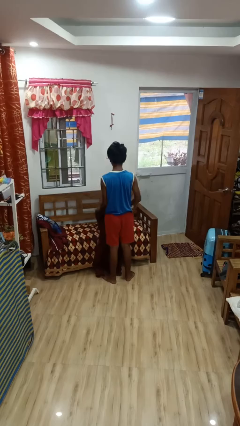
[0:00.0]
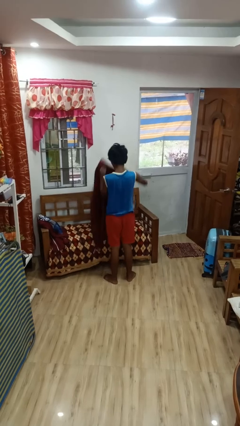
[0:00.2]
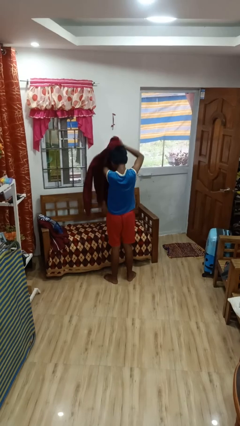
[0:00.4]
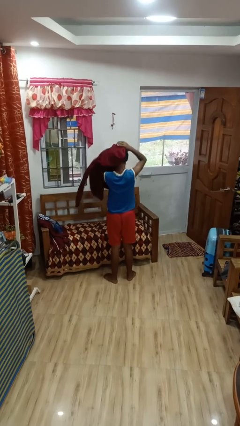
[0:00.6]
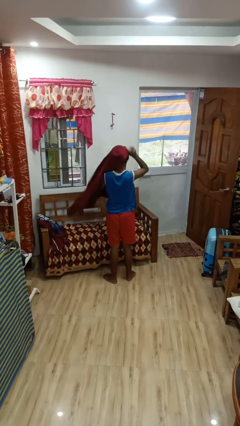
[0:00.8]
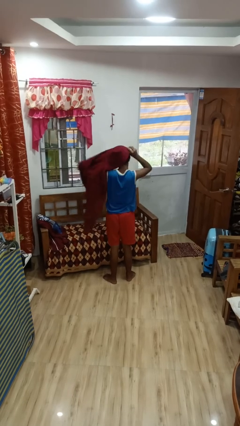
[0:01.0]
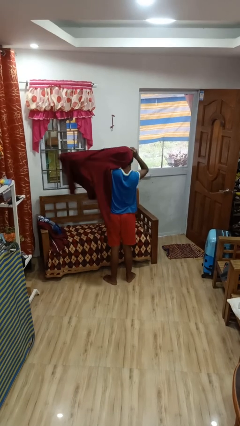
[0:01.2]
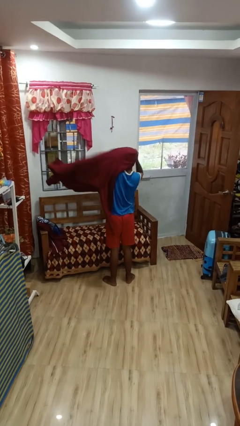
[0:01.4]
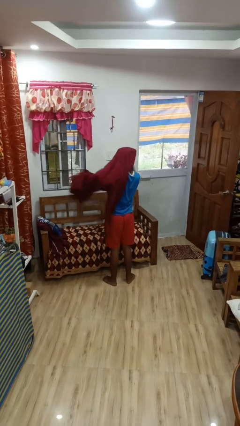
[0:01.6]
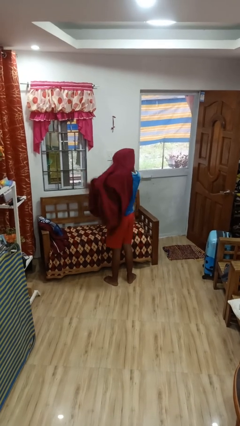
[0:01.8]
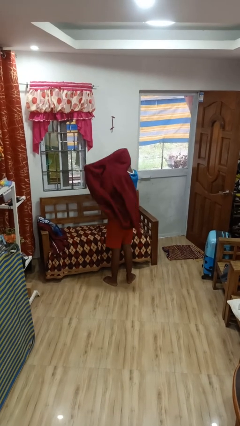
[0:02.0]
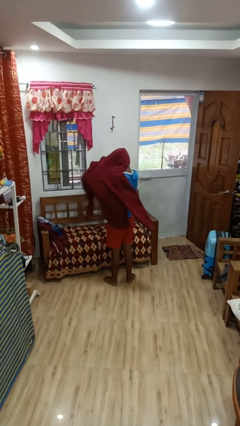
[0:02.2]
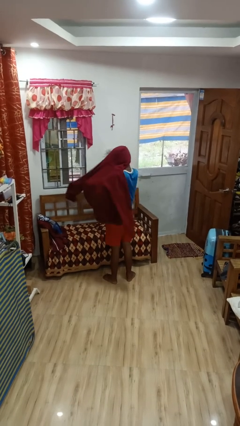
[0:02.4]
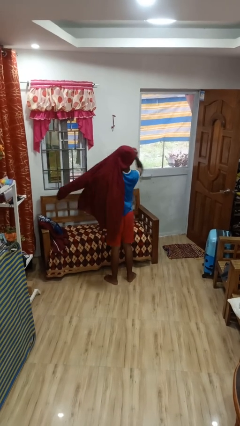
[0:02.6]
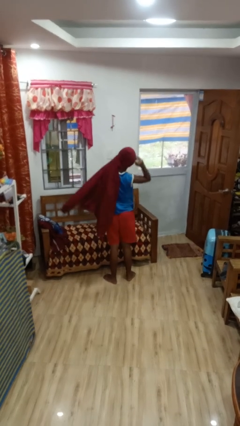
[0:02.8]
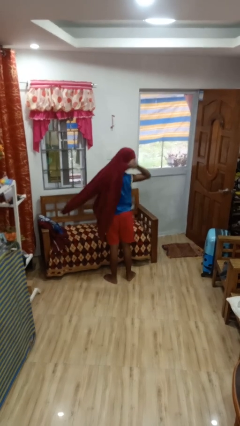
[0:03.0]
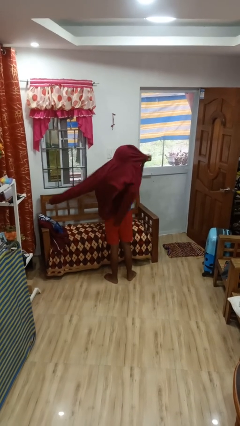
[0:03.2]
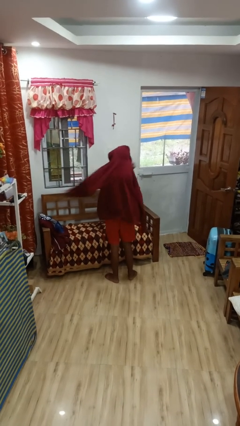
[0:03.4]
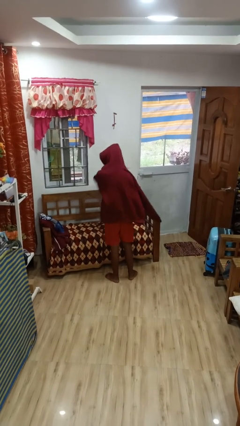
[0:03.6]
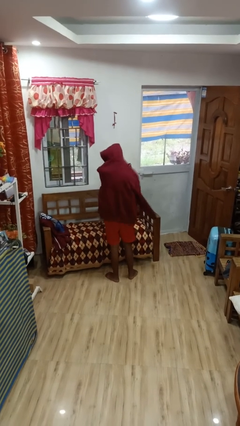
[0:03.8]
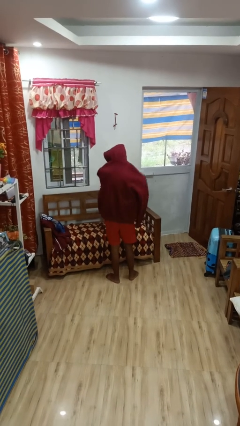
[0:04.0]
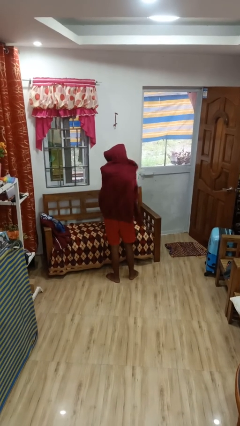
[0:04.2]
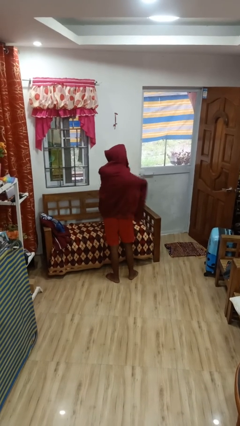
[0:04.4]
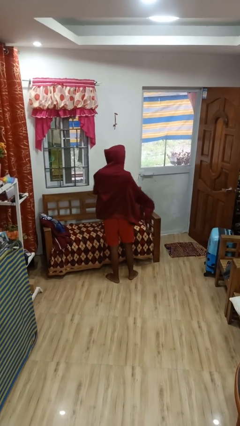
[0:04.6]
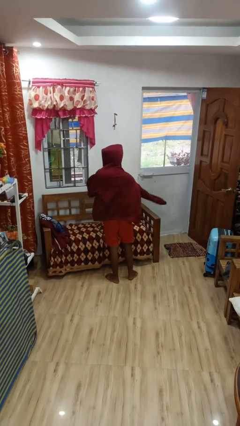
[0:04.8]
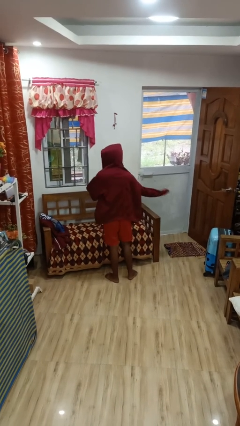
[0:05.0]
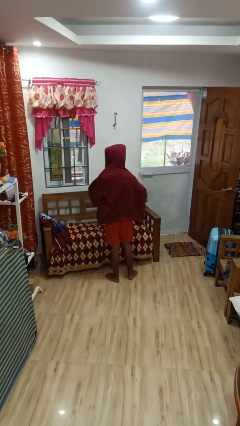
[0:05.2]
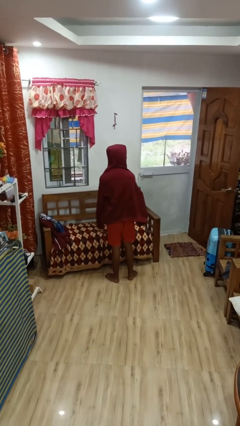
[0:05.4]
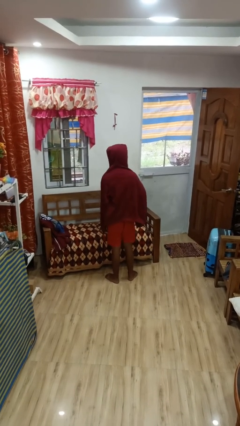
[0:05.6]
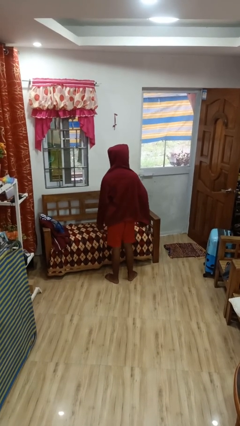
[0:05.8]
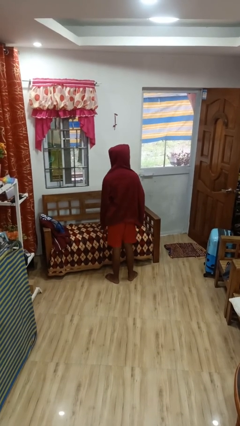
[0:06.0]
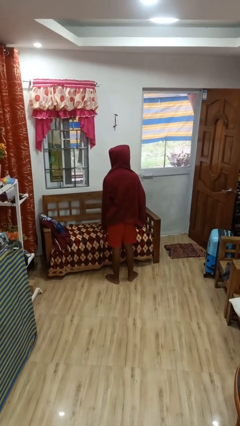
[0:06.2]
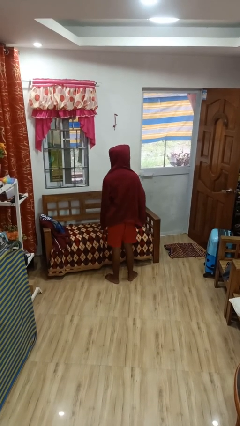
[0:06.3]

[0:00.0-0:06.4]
person puts on hoodie

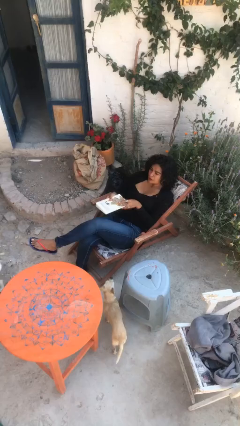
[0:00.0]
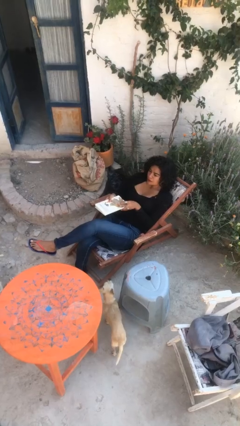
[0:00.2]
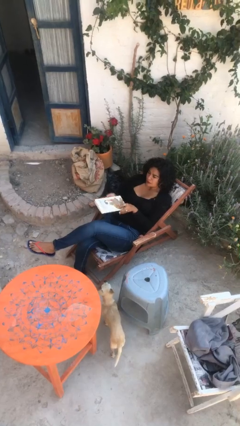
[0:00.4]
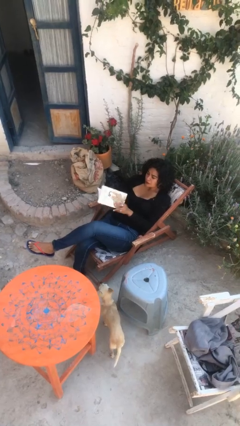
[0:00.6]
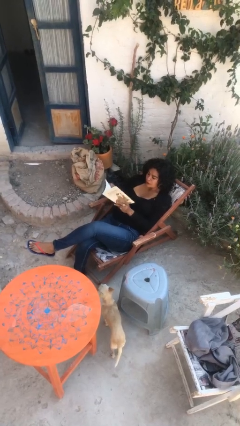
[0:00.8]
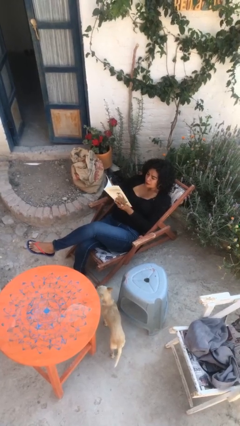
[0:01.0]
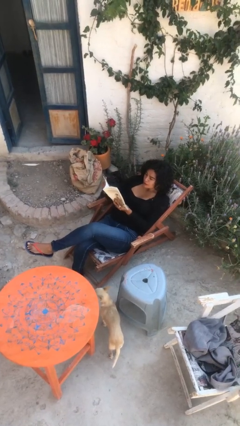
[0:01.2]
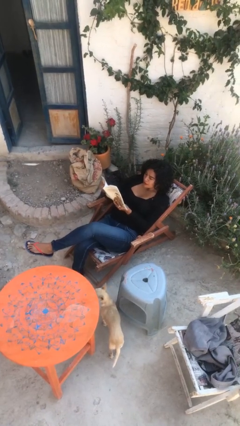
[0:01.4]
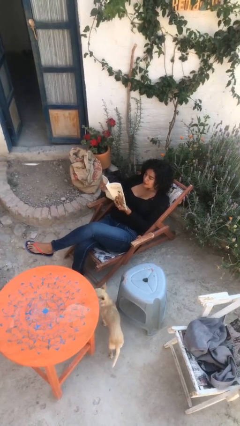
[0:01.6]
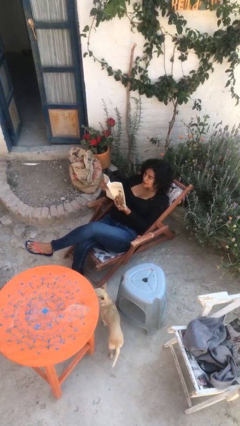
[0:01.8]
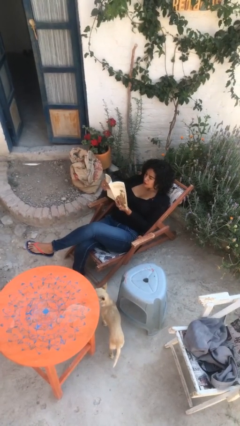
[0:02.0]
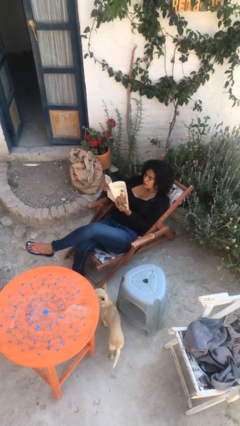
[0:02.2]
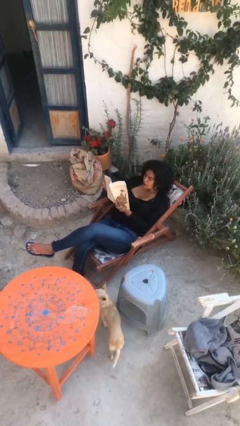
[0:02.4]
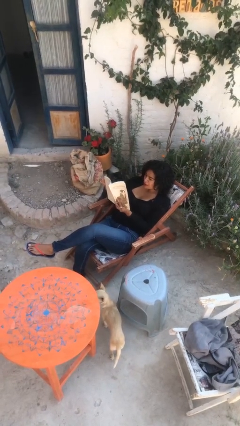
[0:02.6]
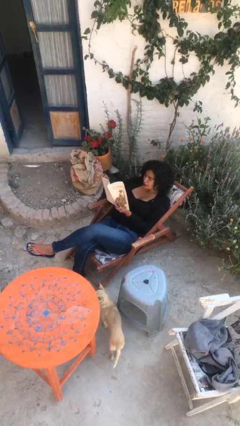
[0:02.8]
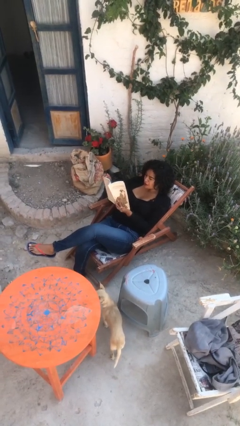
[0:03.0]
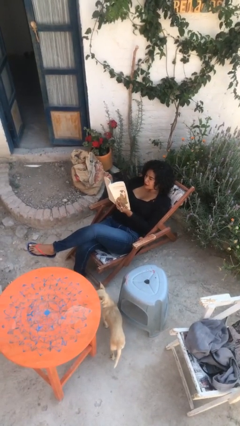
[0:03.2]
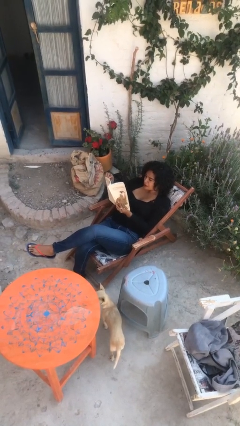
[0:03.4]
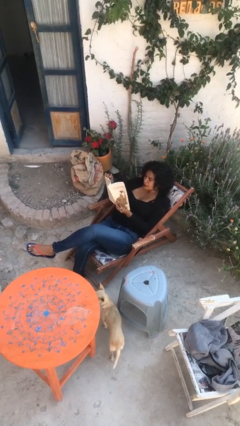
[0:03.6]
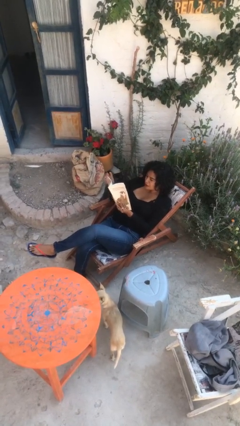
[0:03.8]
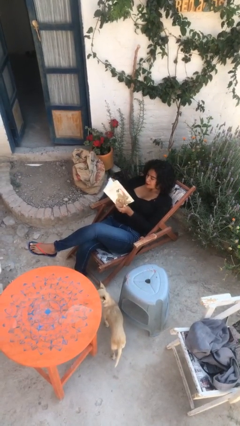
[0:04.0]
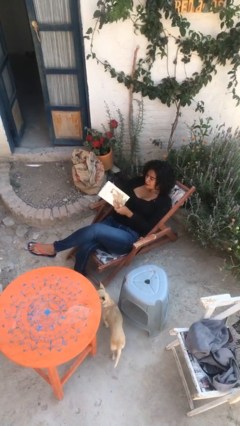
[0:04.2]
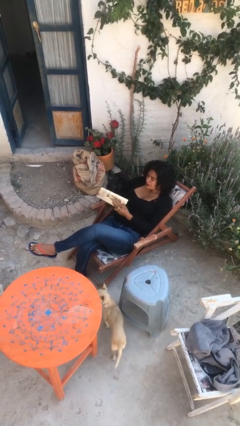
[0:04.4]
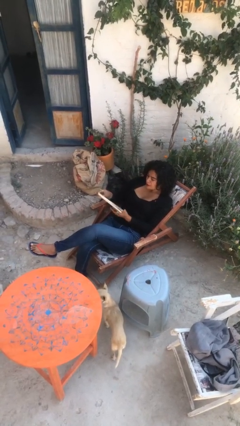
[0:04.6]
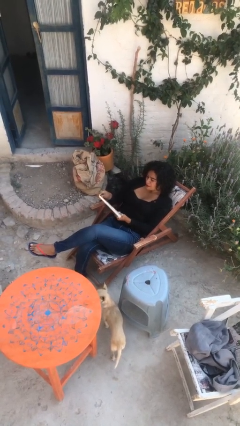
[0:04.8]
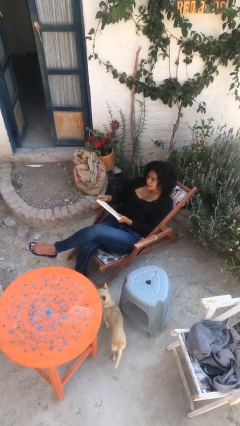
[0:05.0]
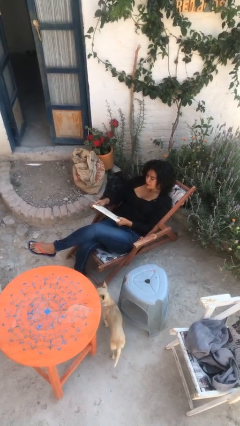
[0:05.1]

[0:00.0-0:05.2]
person reads document

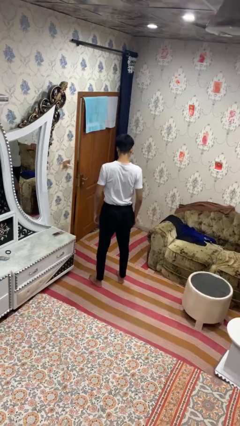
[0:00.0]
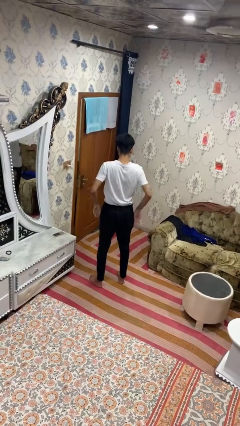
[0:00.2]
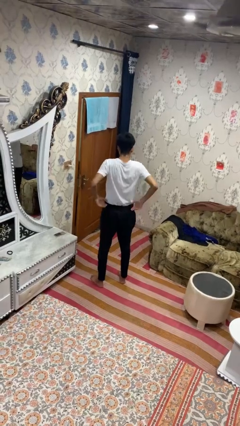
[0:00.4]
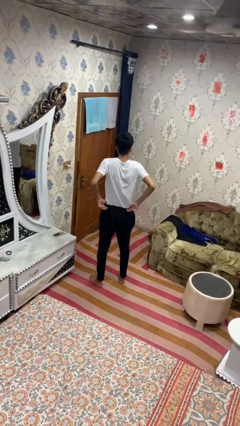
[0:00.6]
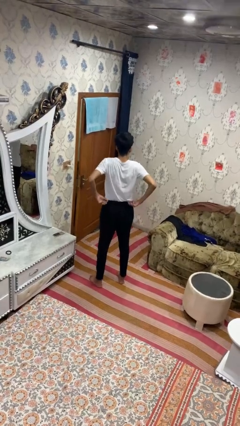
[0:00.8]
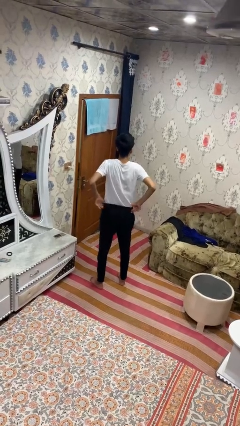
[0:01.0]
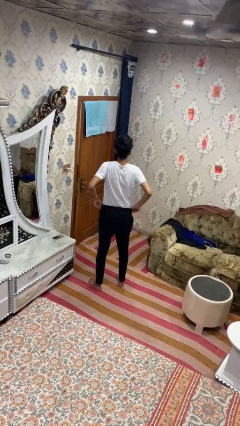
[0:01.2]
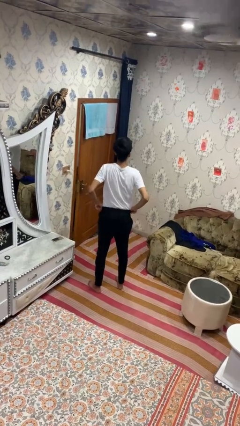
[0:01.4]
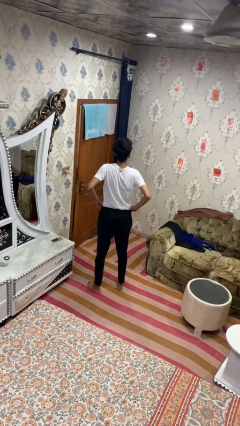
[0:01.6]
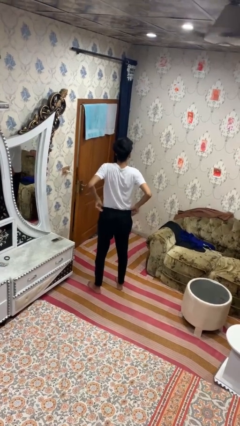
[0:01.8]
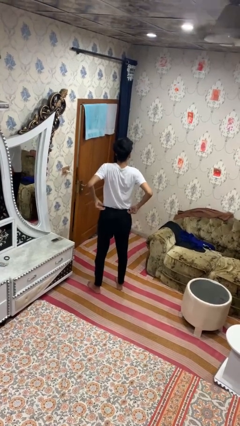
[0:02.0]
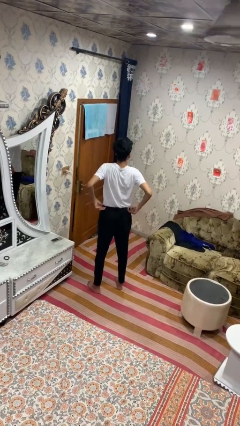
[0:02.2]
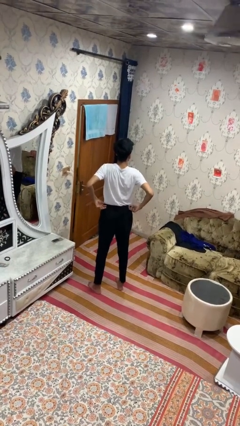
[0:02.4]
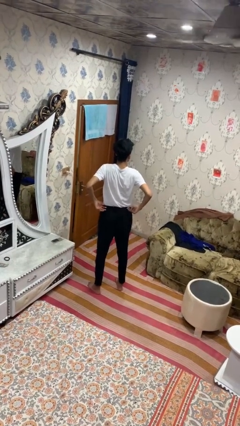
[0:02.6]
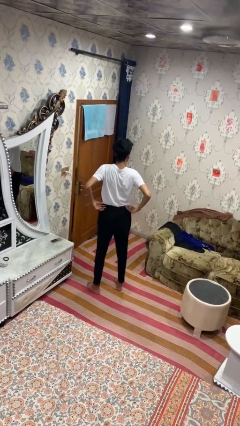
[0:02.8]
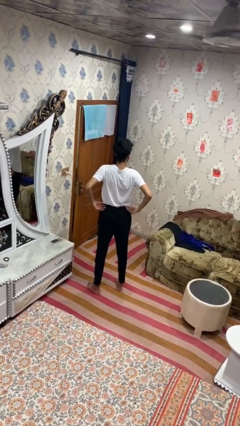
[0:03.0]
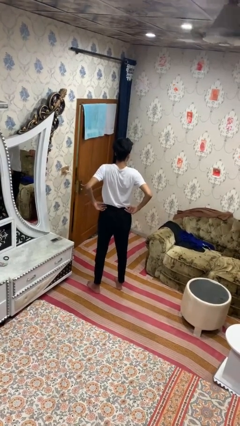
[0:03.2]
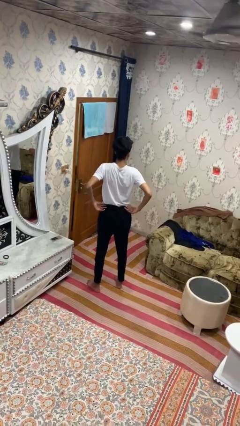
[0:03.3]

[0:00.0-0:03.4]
person hikes up pants

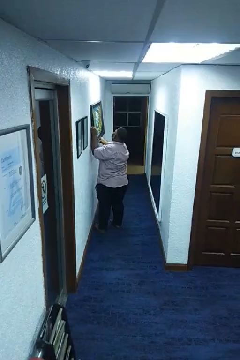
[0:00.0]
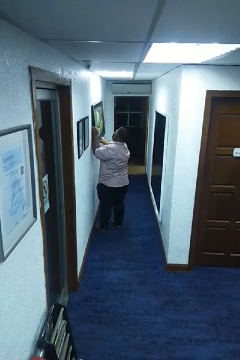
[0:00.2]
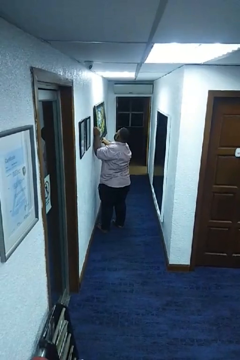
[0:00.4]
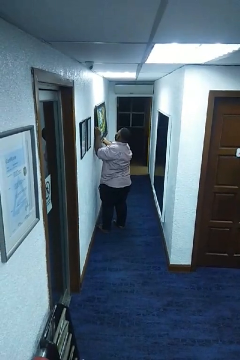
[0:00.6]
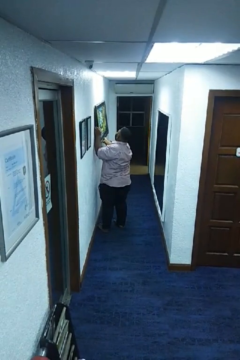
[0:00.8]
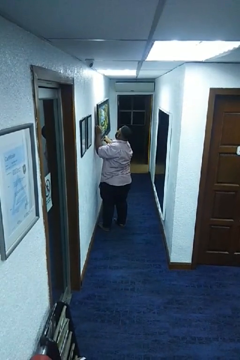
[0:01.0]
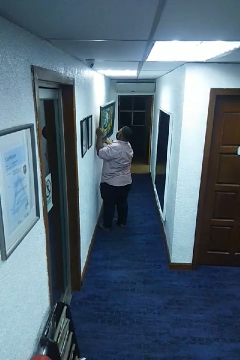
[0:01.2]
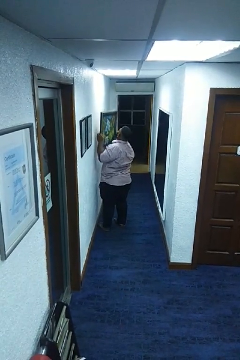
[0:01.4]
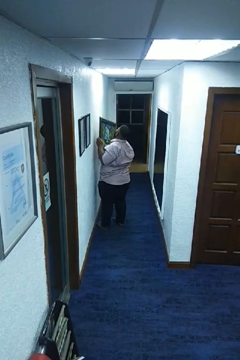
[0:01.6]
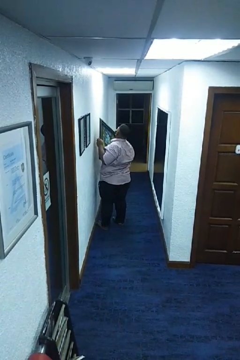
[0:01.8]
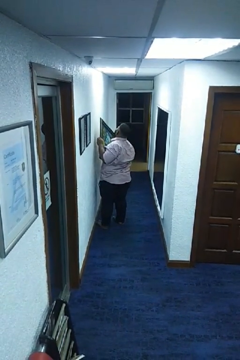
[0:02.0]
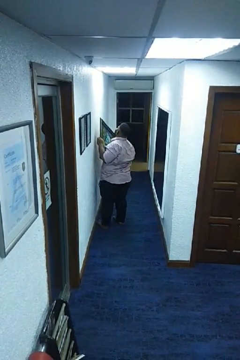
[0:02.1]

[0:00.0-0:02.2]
person takes down picture frame

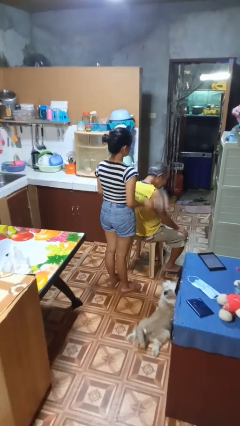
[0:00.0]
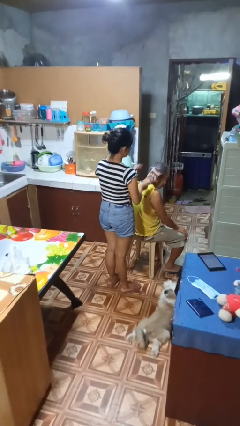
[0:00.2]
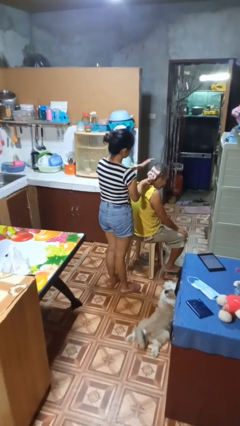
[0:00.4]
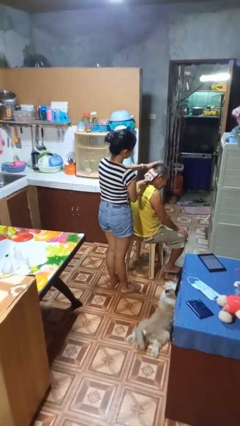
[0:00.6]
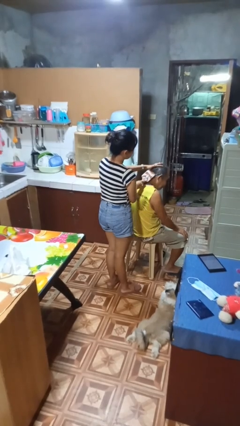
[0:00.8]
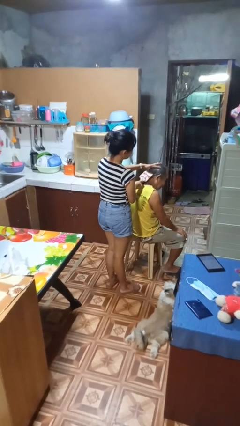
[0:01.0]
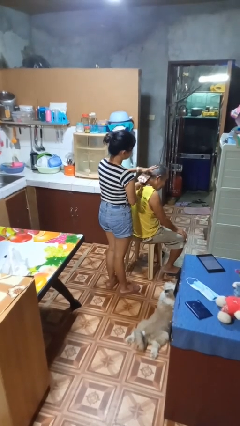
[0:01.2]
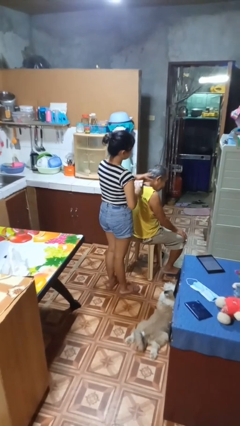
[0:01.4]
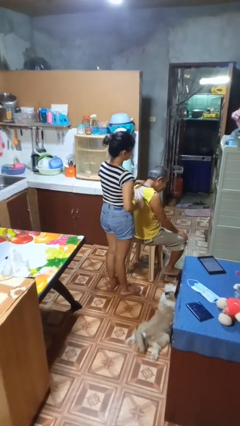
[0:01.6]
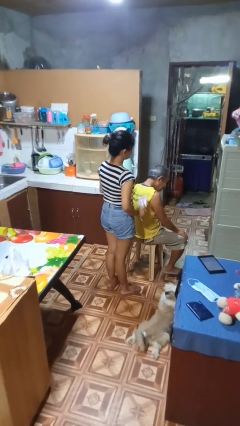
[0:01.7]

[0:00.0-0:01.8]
person brushes hair of person
